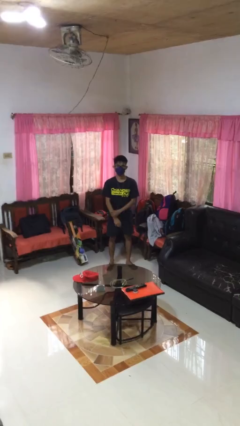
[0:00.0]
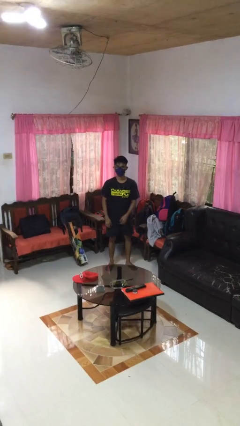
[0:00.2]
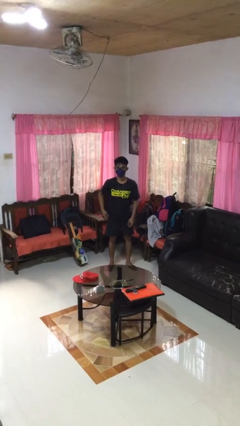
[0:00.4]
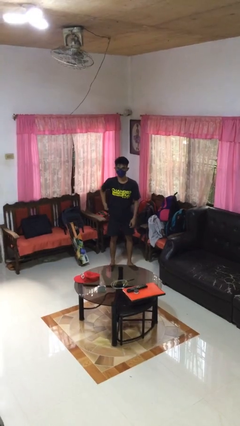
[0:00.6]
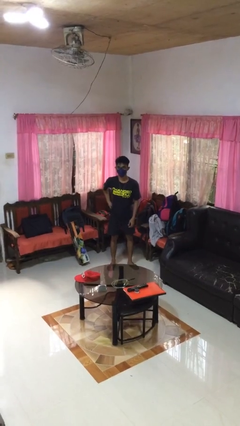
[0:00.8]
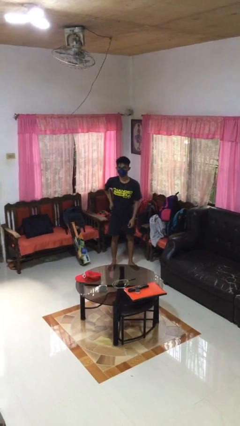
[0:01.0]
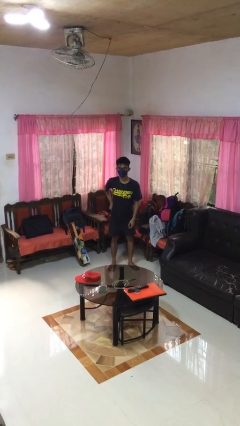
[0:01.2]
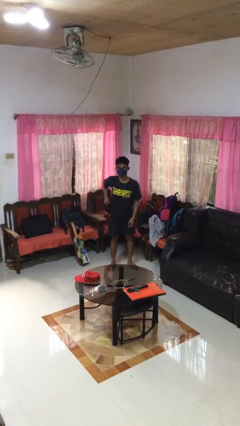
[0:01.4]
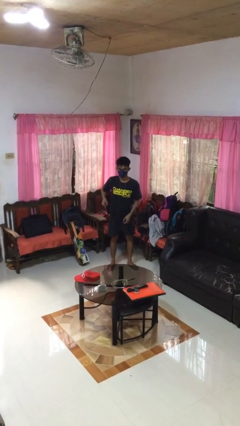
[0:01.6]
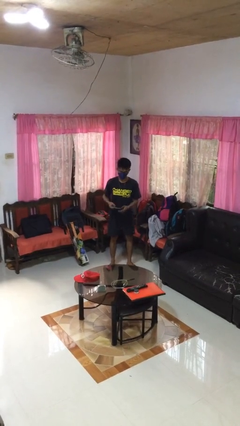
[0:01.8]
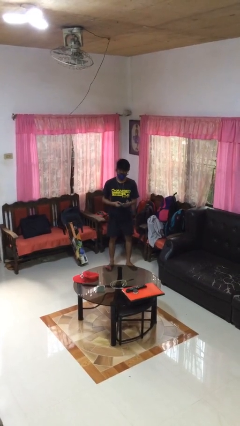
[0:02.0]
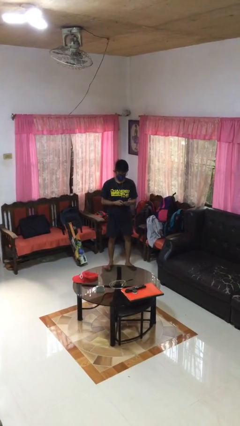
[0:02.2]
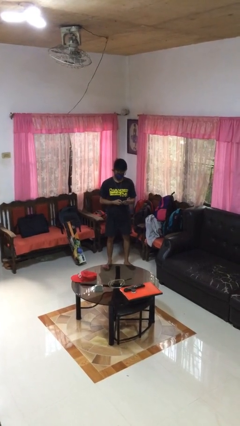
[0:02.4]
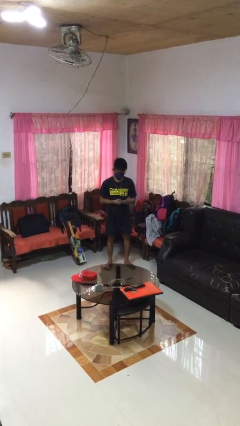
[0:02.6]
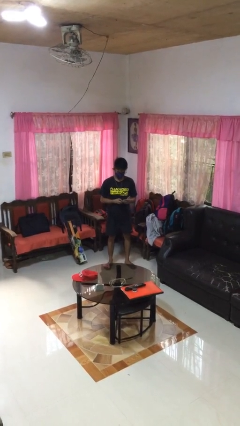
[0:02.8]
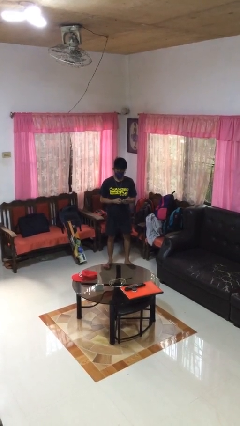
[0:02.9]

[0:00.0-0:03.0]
person takes phone from pocket

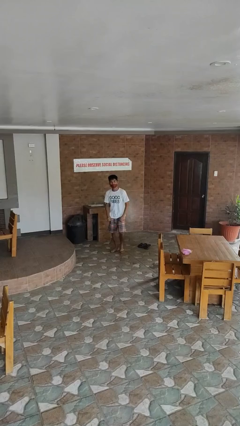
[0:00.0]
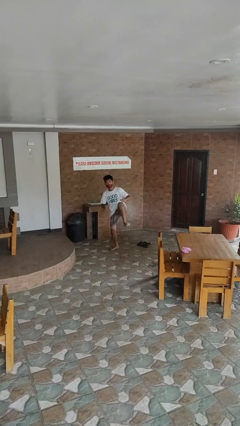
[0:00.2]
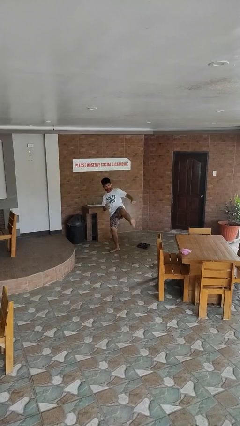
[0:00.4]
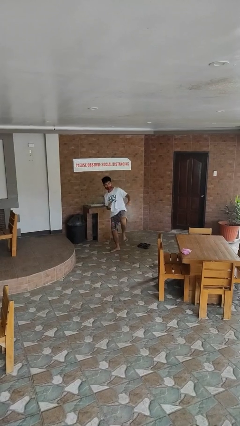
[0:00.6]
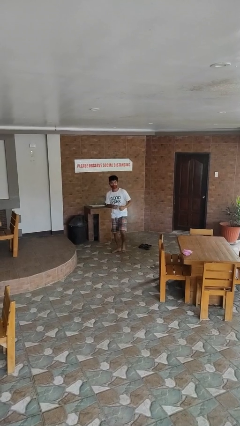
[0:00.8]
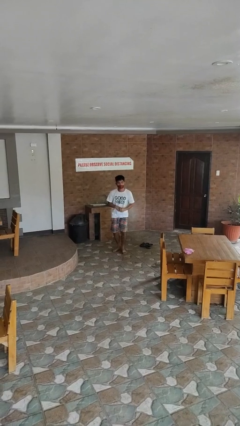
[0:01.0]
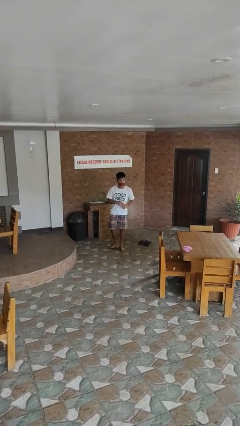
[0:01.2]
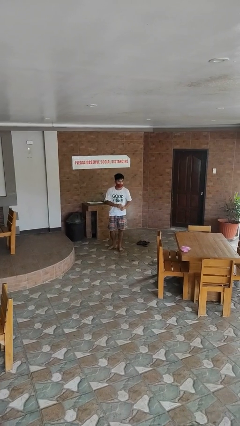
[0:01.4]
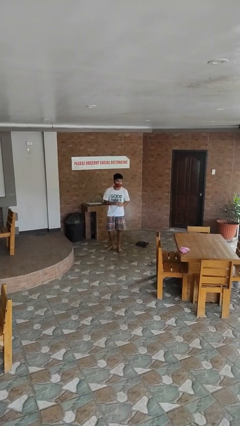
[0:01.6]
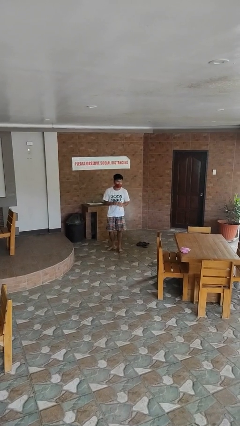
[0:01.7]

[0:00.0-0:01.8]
person karate kicks

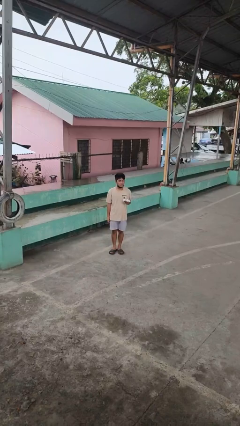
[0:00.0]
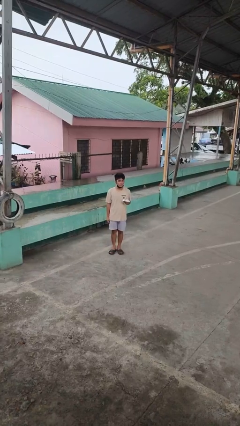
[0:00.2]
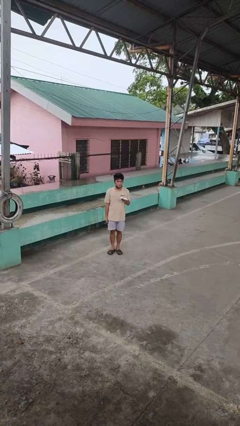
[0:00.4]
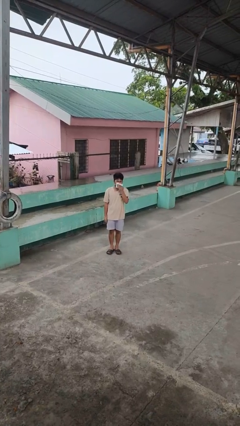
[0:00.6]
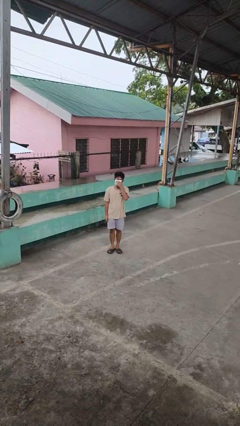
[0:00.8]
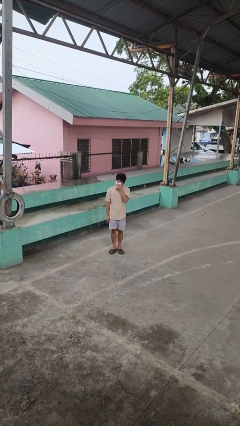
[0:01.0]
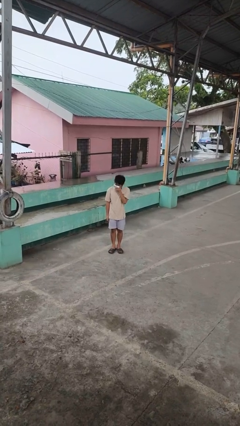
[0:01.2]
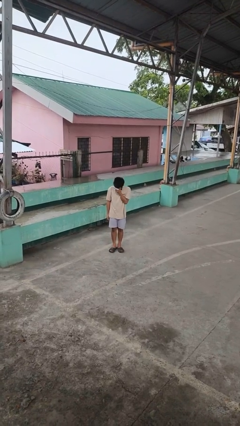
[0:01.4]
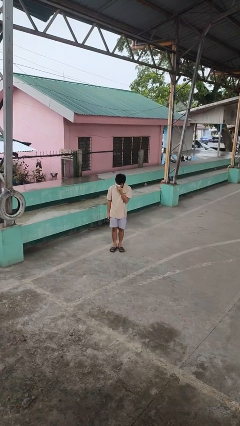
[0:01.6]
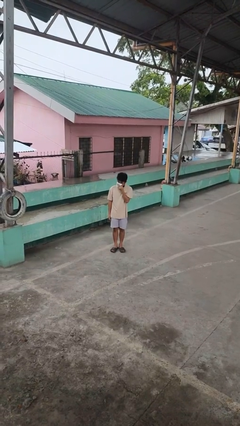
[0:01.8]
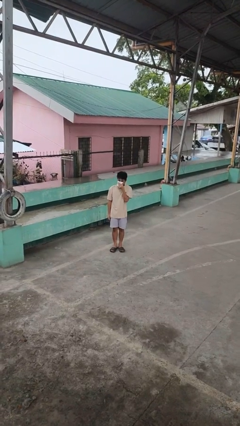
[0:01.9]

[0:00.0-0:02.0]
person blows nose

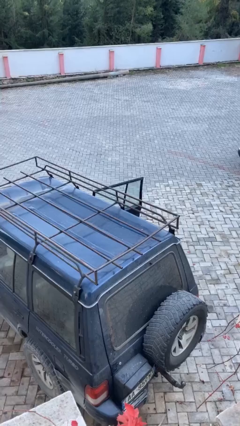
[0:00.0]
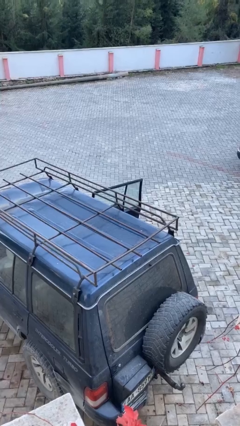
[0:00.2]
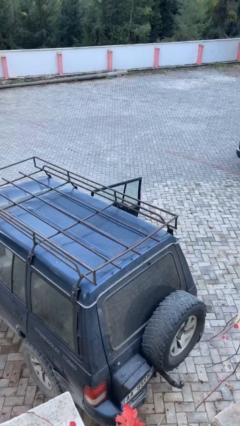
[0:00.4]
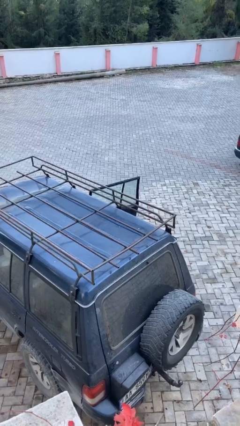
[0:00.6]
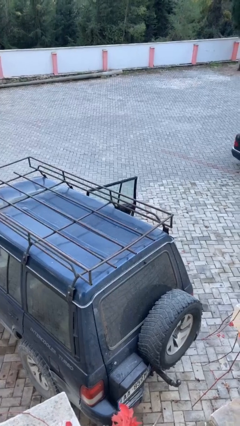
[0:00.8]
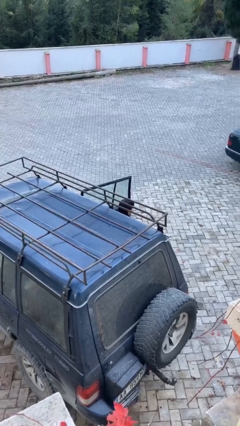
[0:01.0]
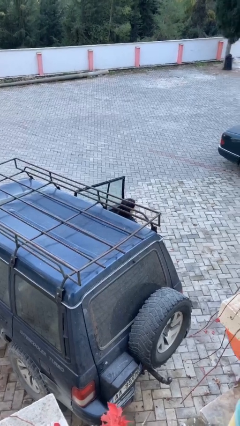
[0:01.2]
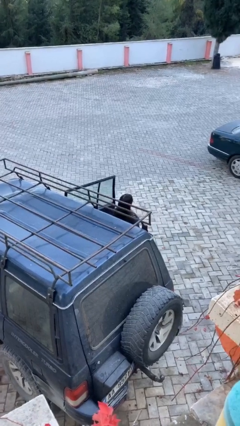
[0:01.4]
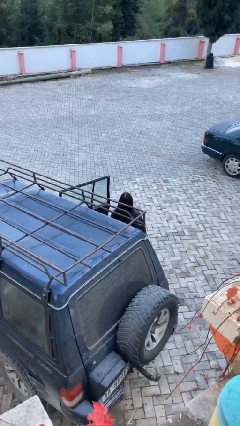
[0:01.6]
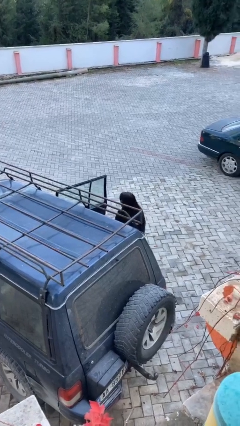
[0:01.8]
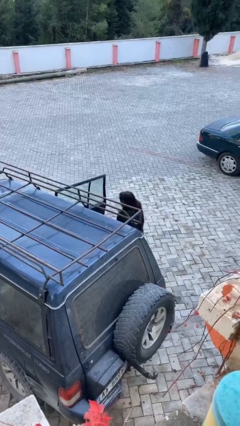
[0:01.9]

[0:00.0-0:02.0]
person exits car

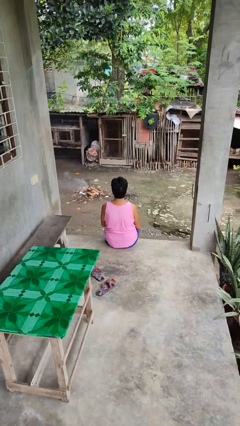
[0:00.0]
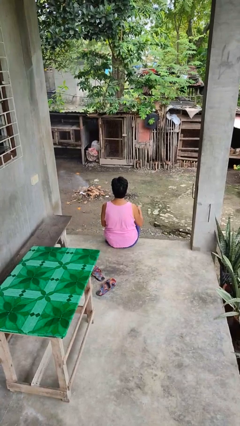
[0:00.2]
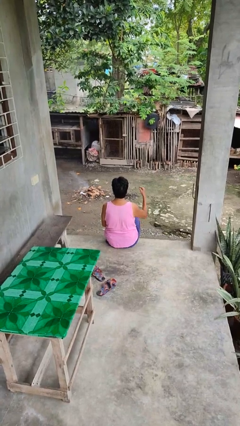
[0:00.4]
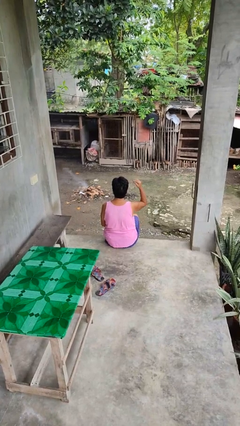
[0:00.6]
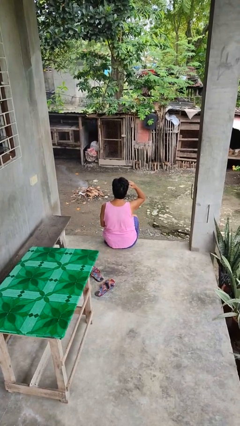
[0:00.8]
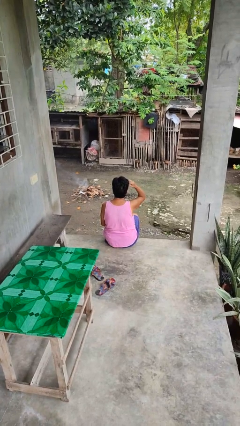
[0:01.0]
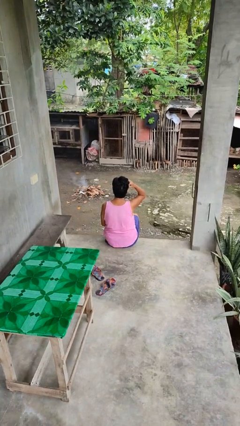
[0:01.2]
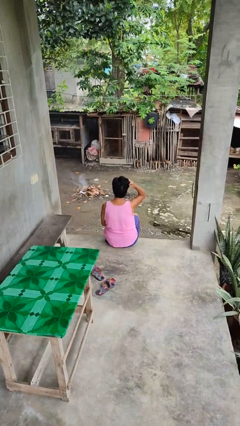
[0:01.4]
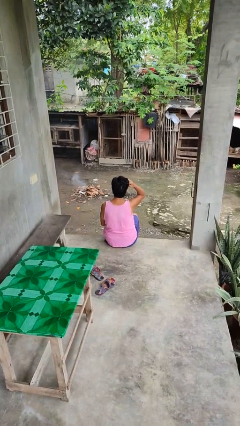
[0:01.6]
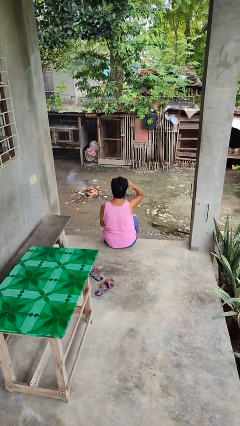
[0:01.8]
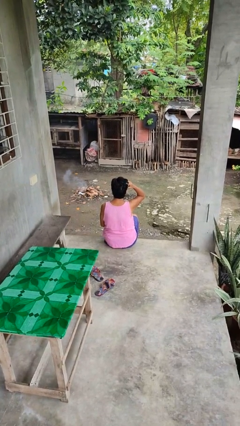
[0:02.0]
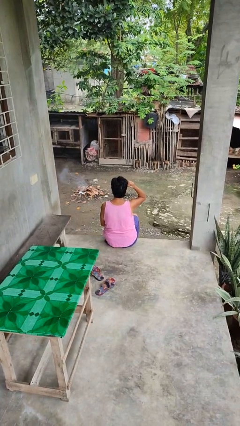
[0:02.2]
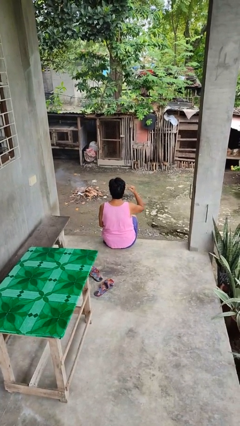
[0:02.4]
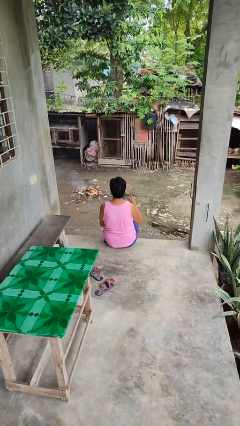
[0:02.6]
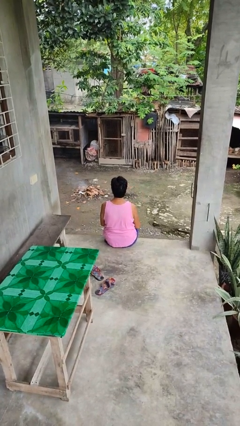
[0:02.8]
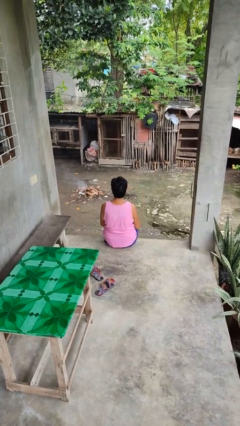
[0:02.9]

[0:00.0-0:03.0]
person scratches face

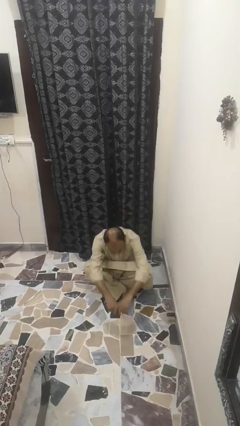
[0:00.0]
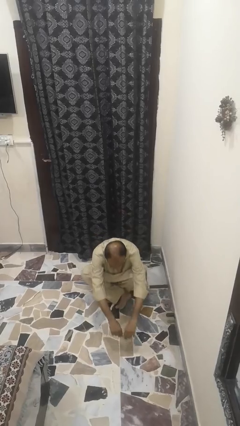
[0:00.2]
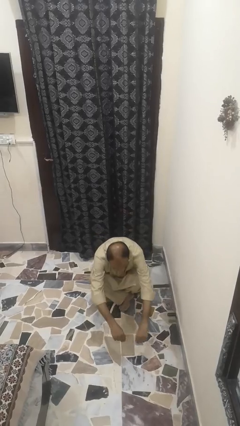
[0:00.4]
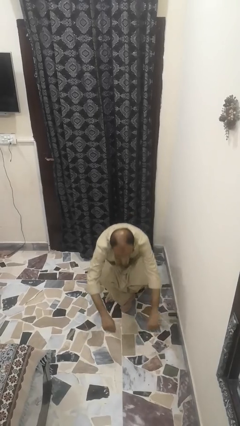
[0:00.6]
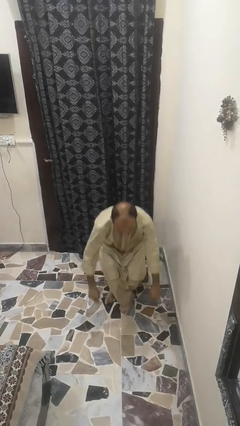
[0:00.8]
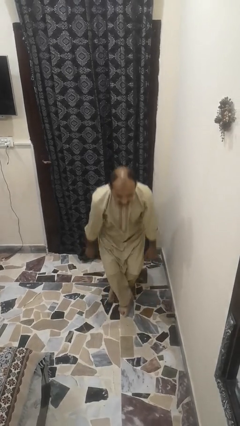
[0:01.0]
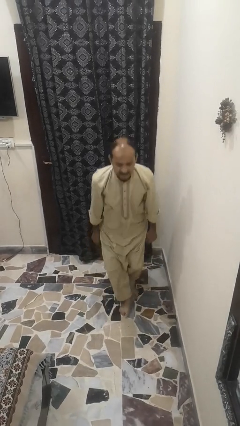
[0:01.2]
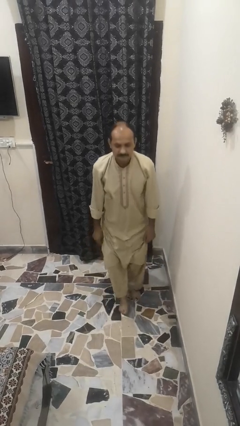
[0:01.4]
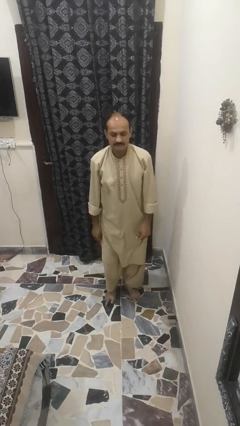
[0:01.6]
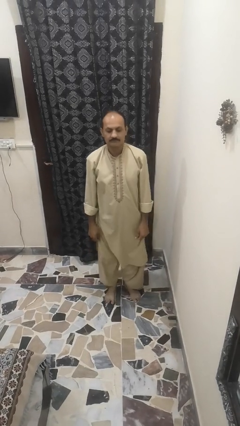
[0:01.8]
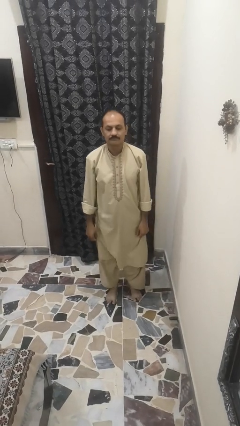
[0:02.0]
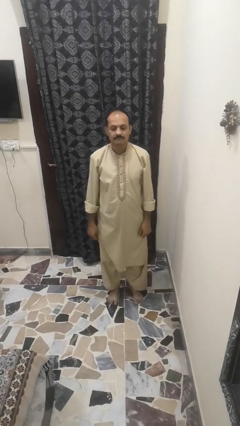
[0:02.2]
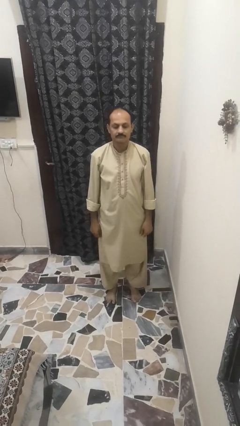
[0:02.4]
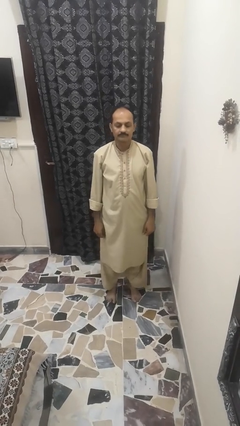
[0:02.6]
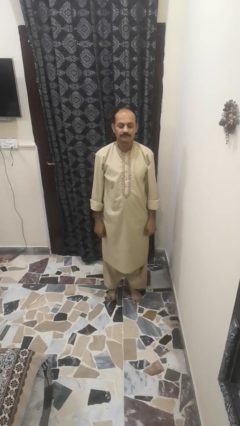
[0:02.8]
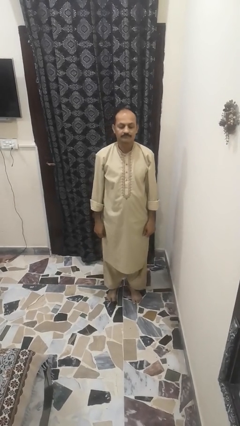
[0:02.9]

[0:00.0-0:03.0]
person reads newspaper

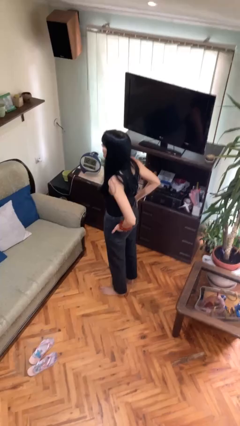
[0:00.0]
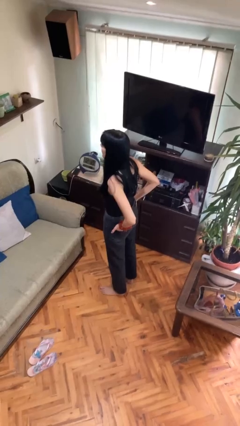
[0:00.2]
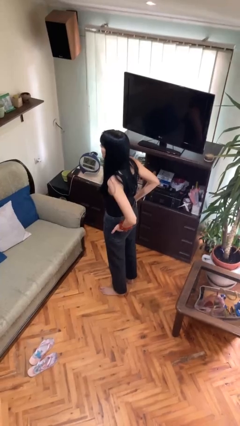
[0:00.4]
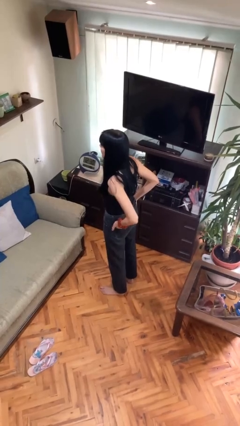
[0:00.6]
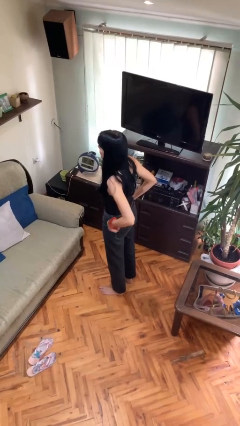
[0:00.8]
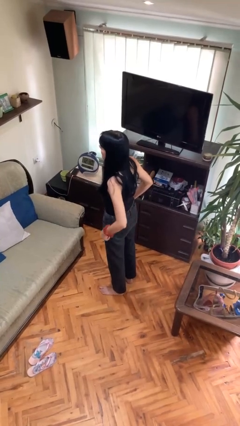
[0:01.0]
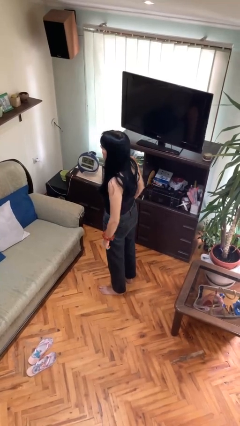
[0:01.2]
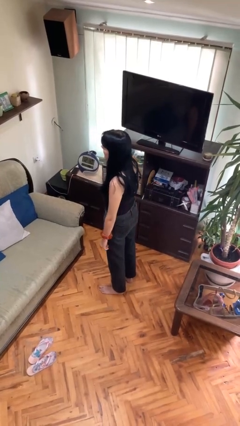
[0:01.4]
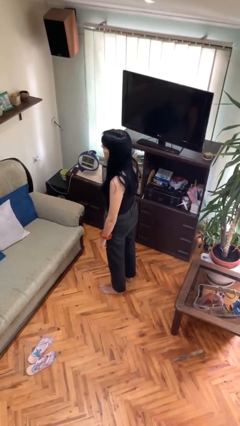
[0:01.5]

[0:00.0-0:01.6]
person puts hands in back pockets

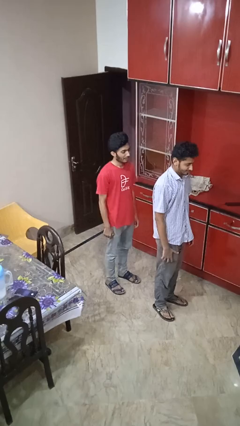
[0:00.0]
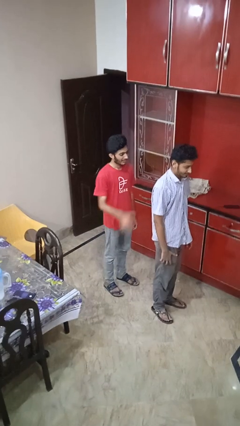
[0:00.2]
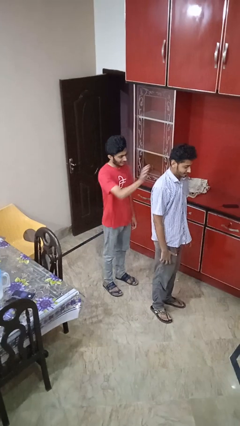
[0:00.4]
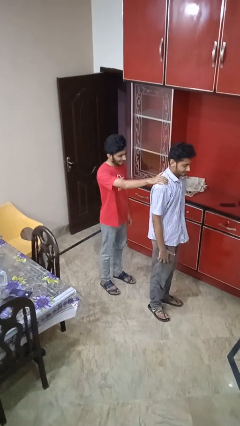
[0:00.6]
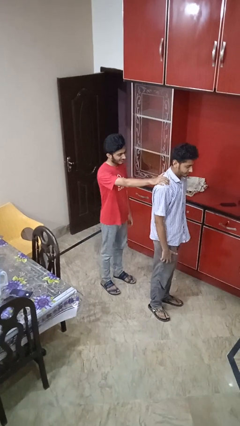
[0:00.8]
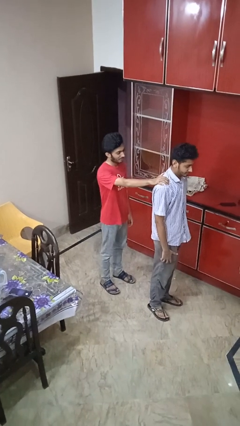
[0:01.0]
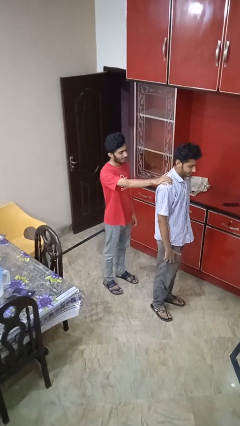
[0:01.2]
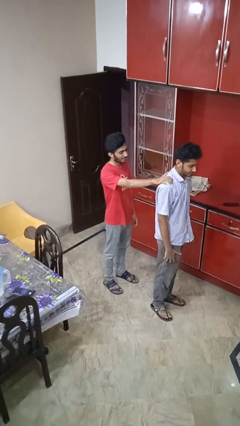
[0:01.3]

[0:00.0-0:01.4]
person grabs person by shoulder
